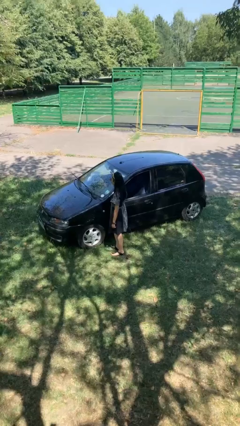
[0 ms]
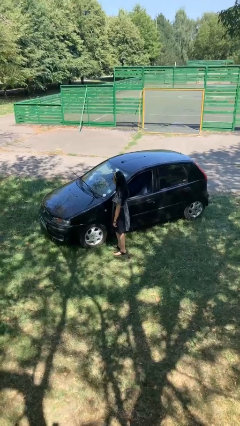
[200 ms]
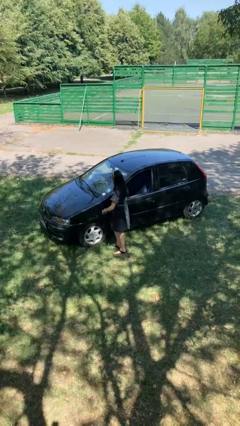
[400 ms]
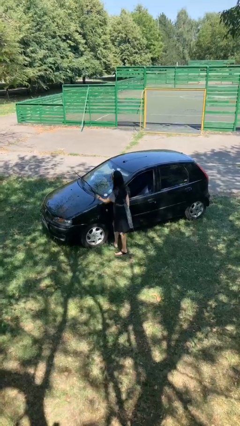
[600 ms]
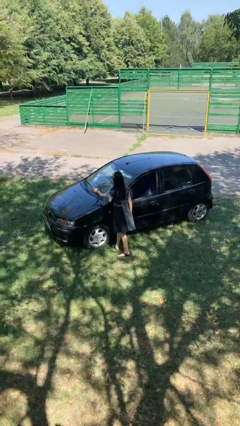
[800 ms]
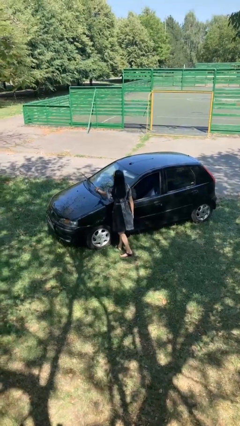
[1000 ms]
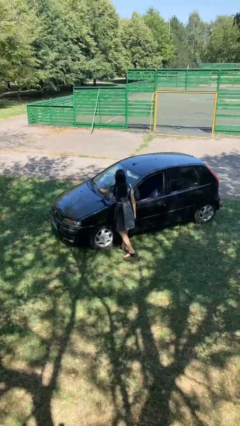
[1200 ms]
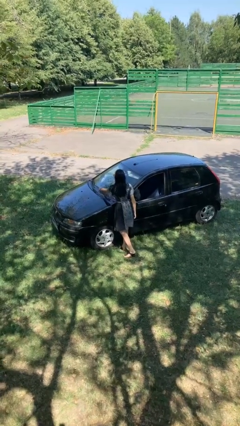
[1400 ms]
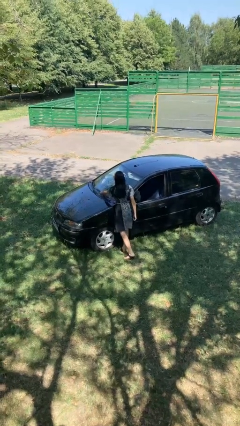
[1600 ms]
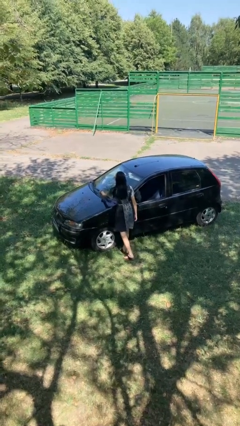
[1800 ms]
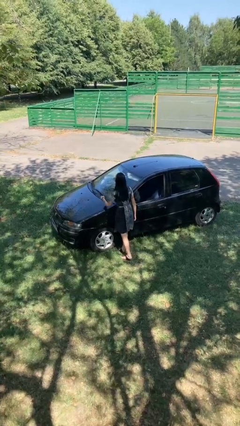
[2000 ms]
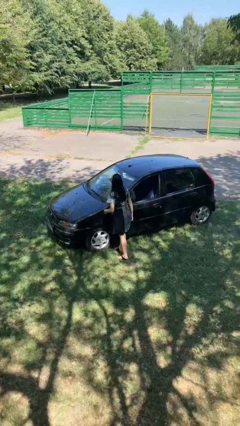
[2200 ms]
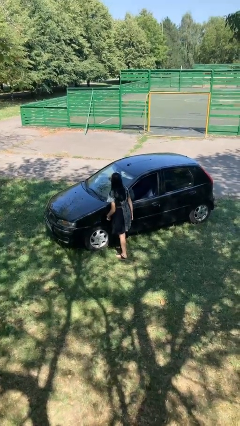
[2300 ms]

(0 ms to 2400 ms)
person flips down car wipers

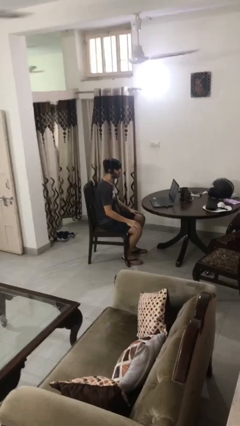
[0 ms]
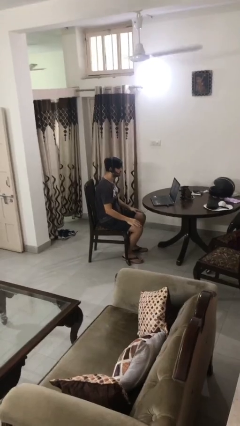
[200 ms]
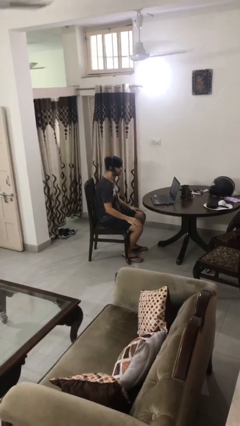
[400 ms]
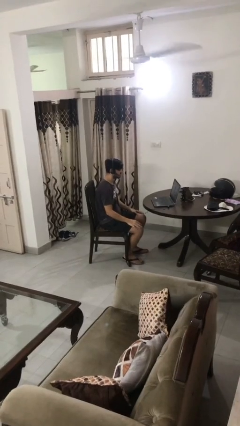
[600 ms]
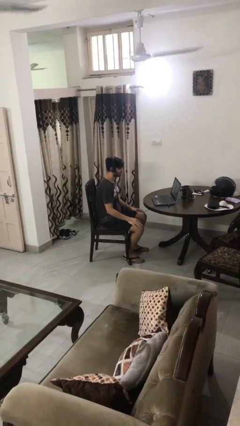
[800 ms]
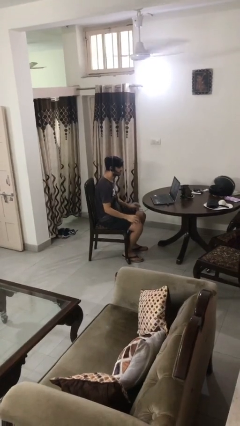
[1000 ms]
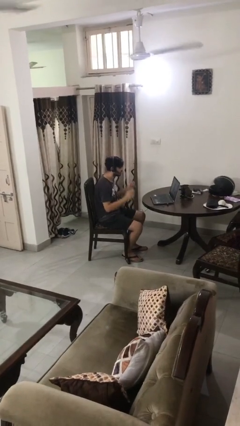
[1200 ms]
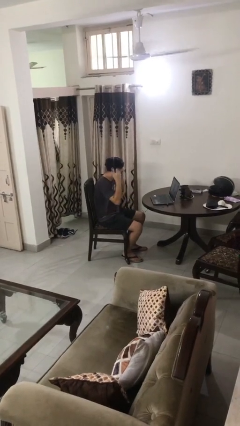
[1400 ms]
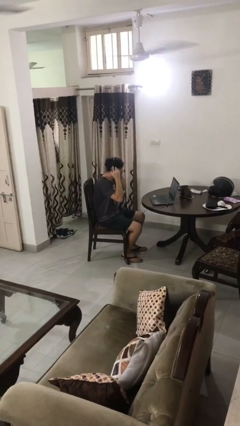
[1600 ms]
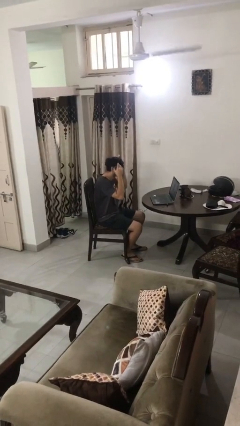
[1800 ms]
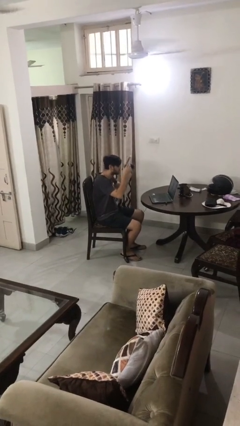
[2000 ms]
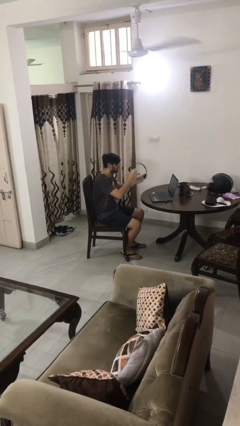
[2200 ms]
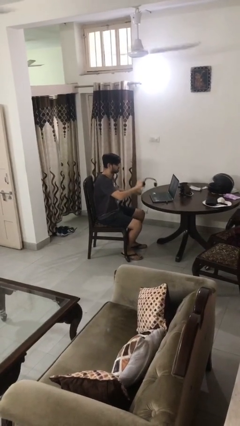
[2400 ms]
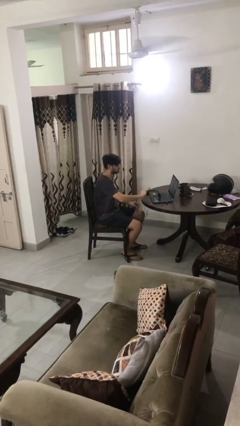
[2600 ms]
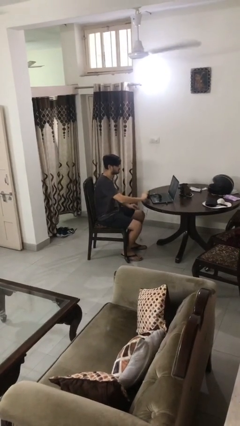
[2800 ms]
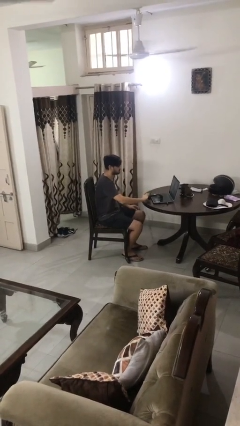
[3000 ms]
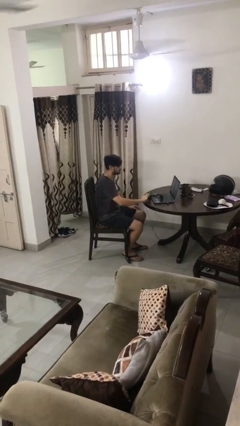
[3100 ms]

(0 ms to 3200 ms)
person takes off headphones

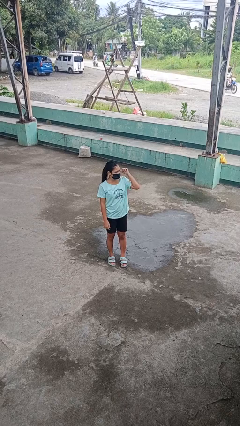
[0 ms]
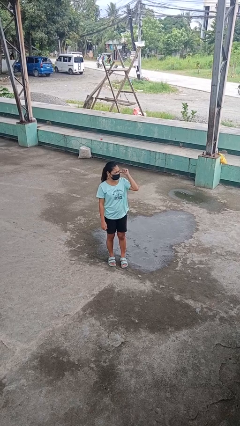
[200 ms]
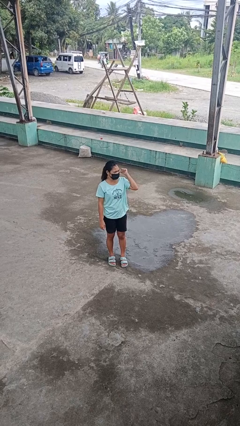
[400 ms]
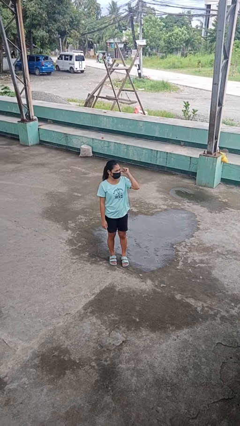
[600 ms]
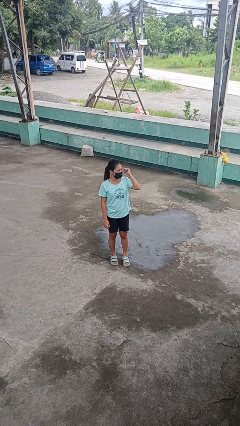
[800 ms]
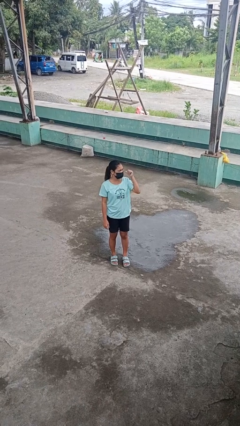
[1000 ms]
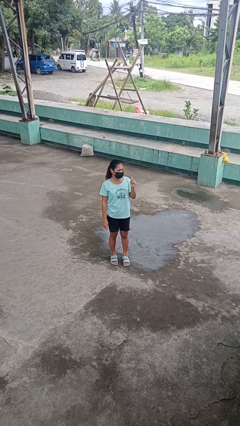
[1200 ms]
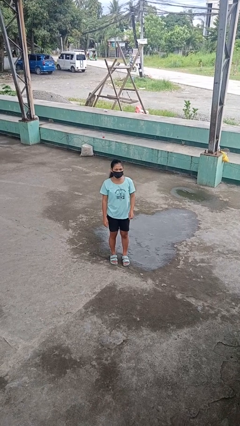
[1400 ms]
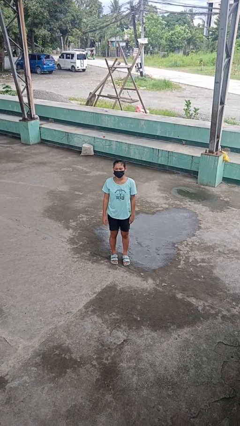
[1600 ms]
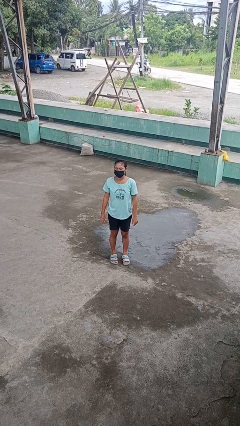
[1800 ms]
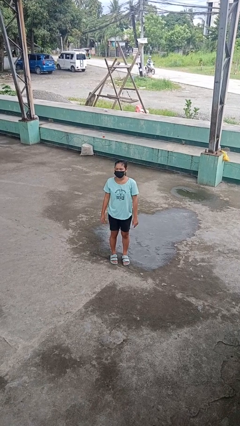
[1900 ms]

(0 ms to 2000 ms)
person gestures behind me

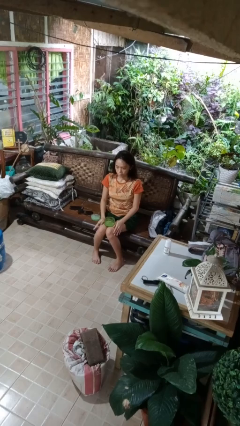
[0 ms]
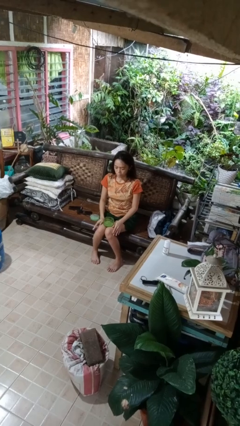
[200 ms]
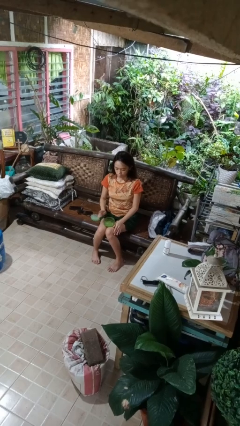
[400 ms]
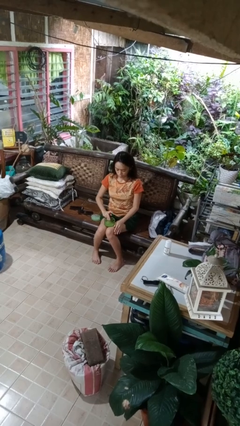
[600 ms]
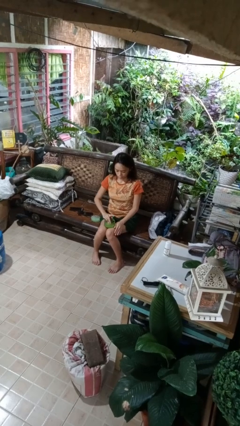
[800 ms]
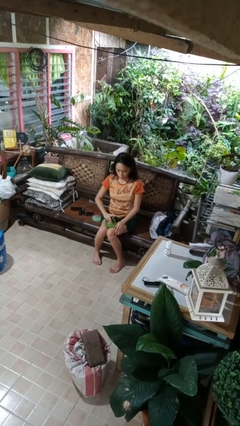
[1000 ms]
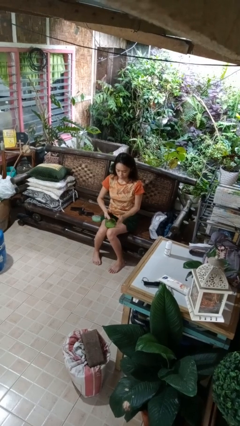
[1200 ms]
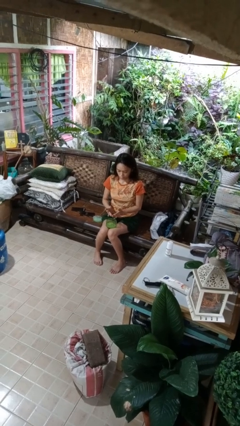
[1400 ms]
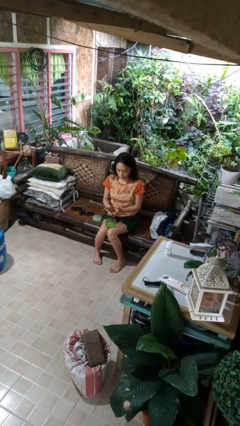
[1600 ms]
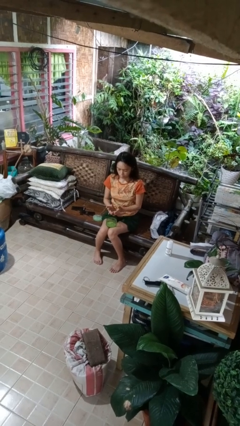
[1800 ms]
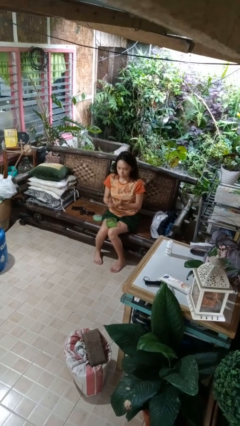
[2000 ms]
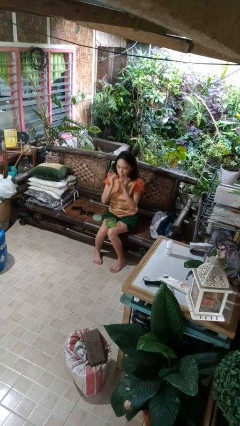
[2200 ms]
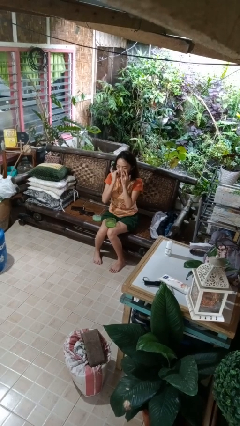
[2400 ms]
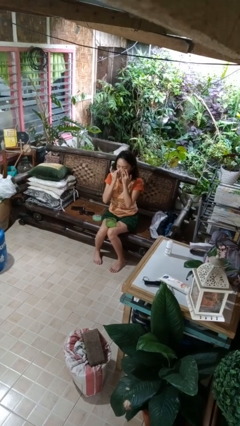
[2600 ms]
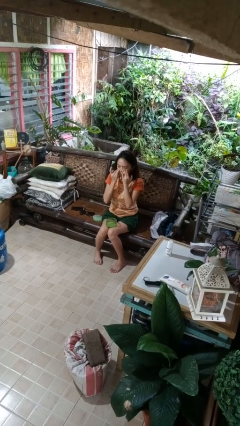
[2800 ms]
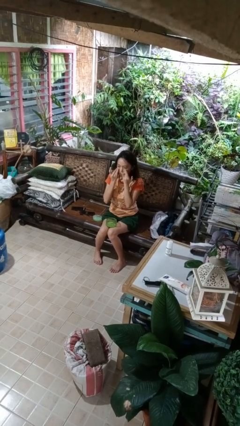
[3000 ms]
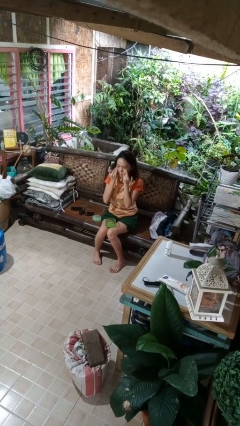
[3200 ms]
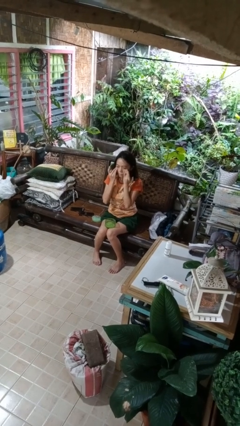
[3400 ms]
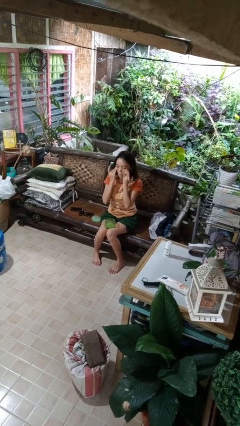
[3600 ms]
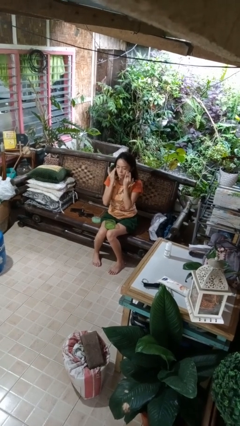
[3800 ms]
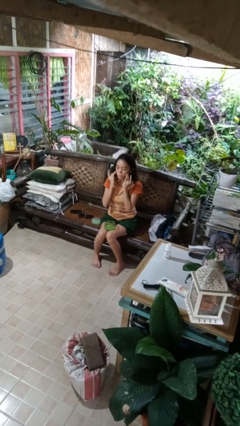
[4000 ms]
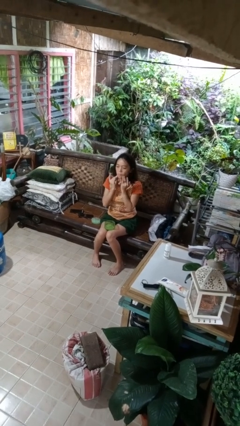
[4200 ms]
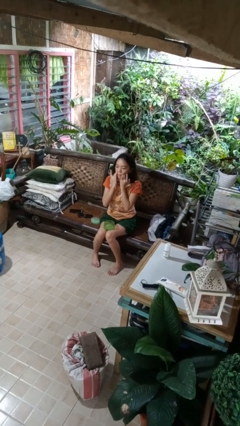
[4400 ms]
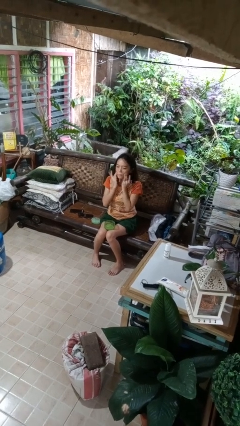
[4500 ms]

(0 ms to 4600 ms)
person applies facial moisturizer

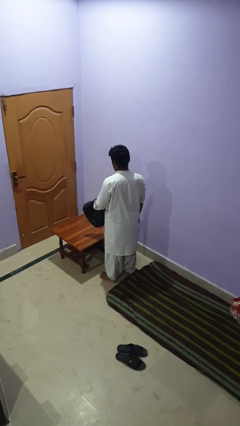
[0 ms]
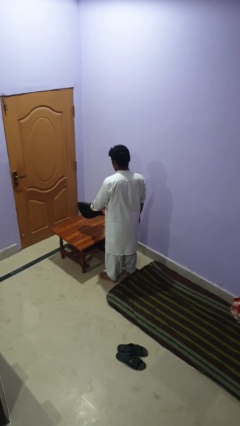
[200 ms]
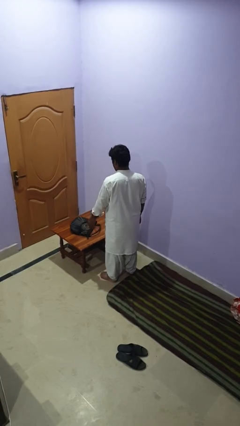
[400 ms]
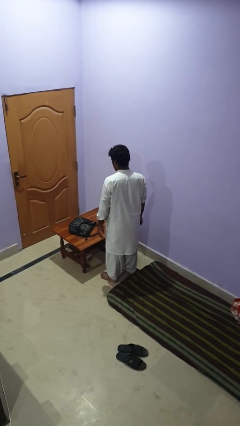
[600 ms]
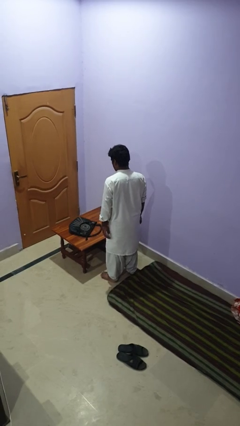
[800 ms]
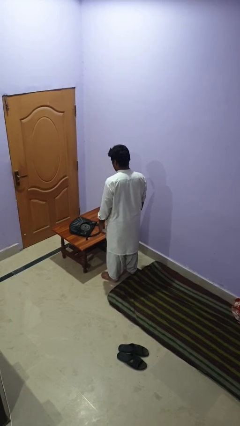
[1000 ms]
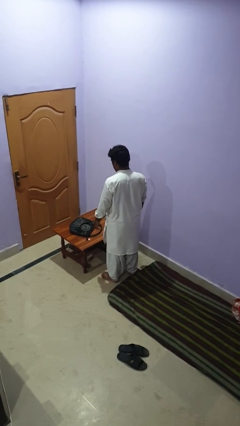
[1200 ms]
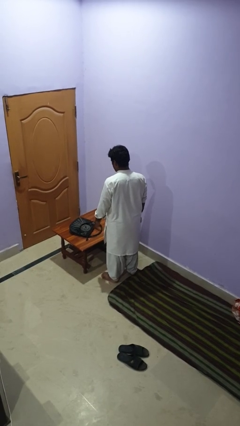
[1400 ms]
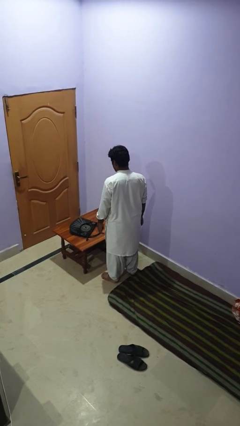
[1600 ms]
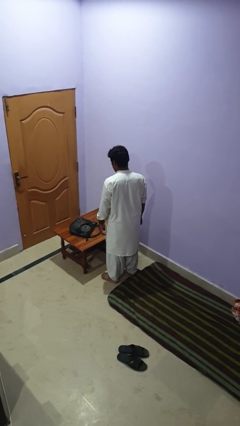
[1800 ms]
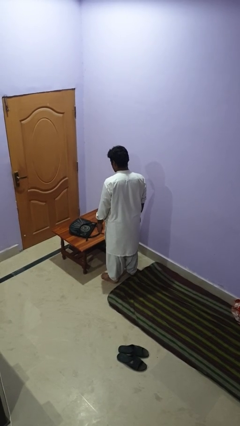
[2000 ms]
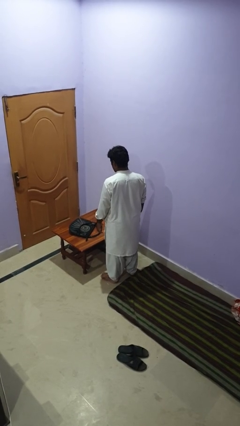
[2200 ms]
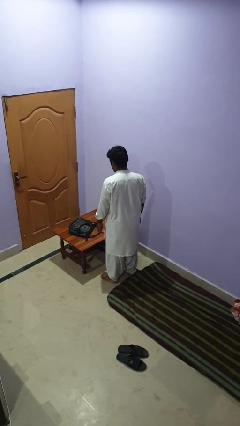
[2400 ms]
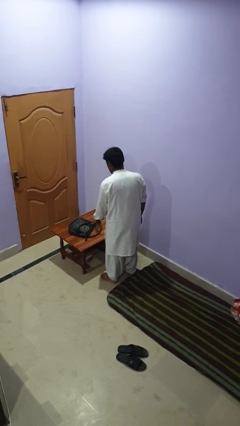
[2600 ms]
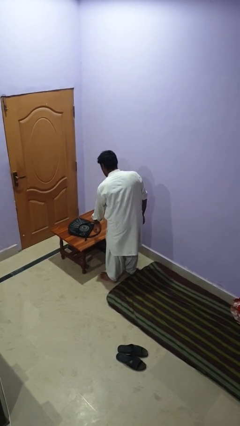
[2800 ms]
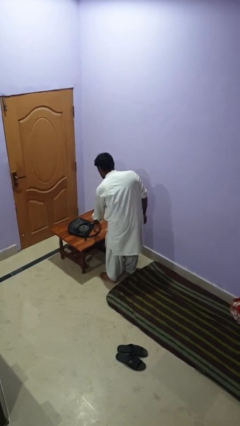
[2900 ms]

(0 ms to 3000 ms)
person throws object on table

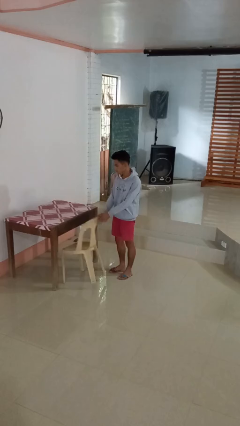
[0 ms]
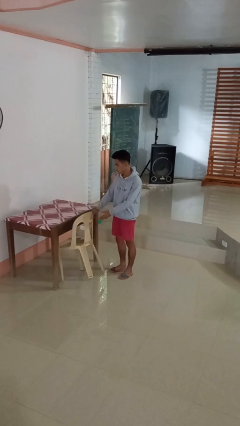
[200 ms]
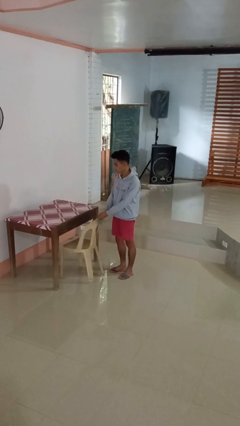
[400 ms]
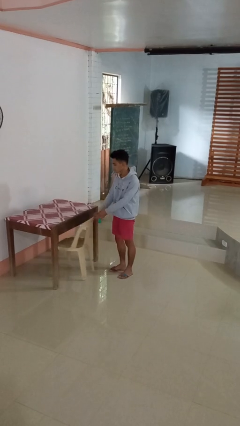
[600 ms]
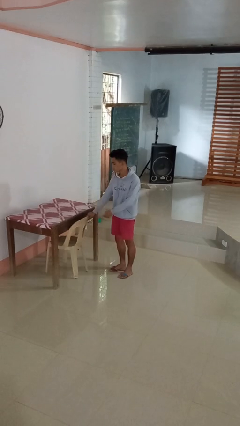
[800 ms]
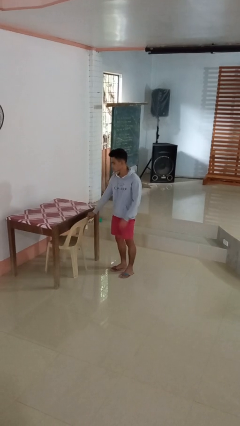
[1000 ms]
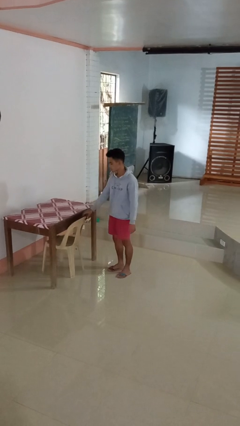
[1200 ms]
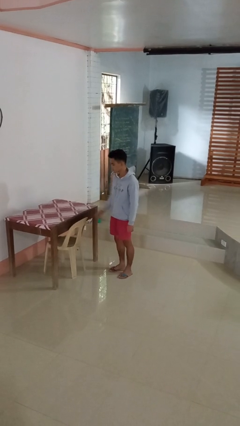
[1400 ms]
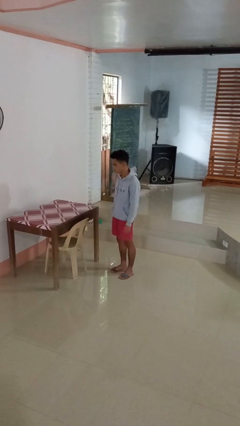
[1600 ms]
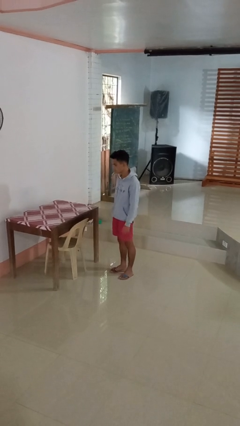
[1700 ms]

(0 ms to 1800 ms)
person pushes in chair
